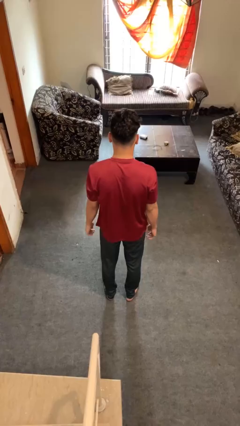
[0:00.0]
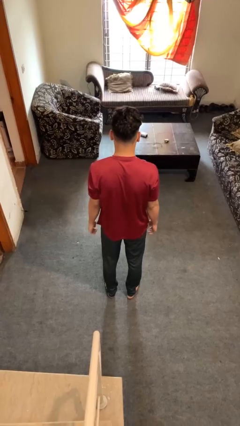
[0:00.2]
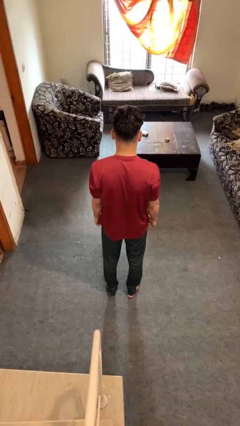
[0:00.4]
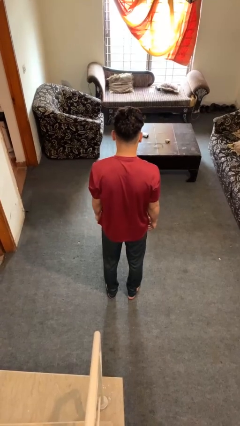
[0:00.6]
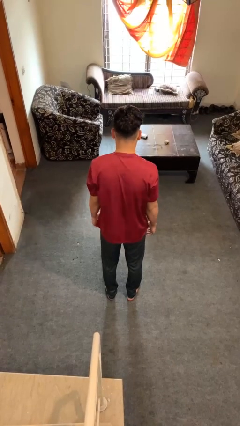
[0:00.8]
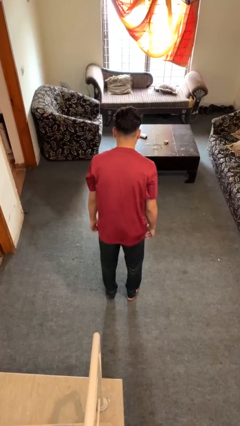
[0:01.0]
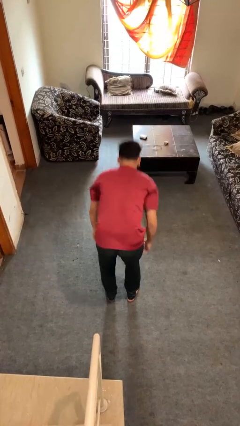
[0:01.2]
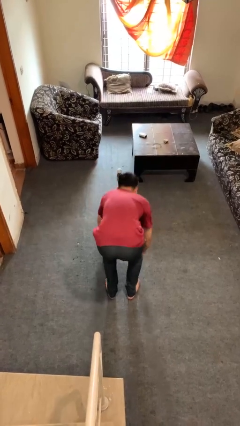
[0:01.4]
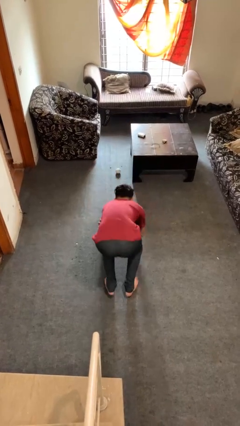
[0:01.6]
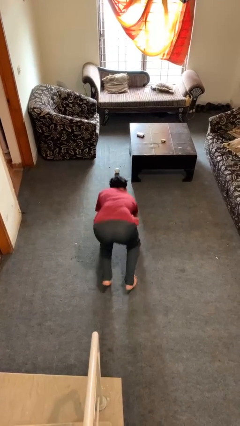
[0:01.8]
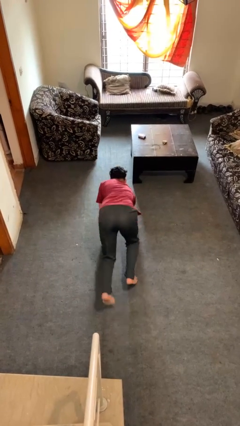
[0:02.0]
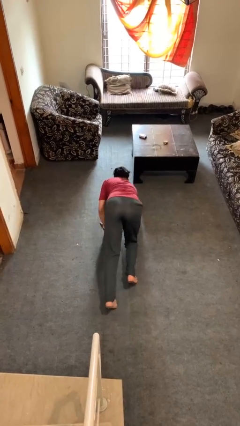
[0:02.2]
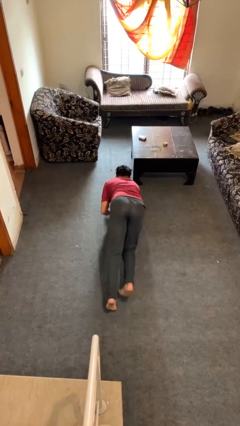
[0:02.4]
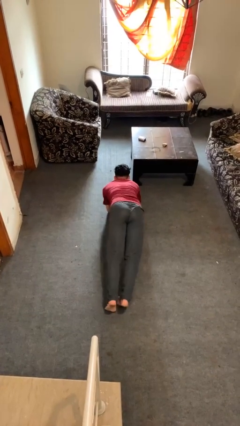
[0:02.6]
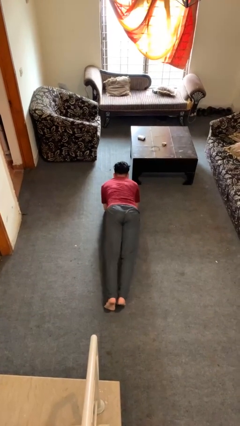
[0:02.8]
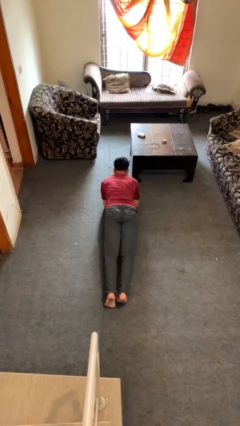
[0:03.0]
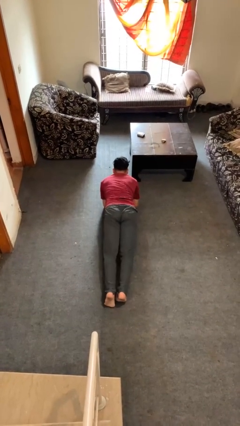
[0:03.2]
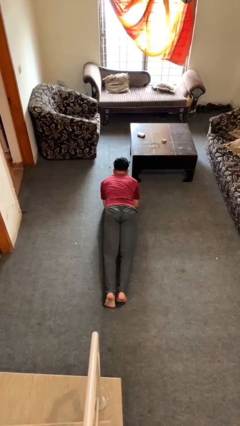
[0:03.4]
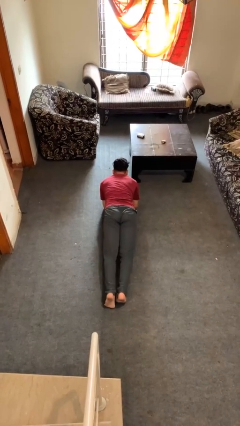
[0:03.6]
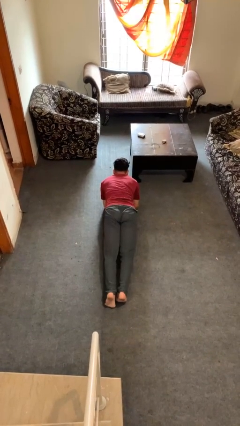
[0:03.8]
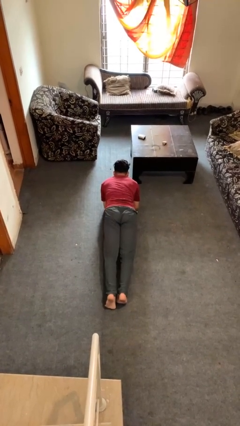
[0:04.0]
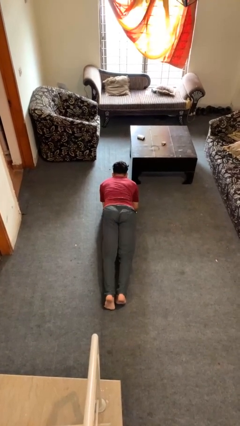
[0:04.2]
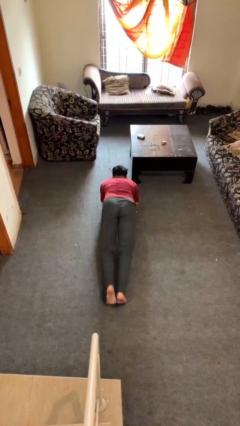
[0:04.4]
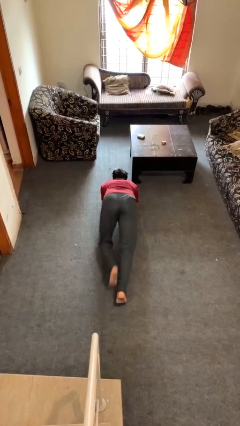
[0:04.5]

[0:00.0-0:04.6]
person exercises with plank

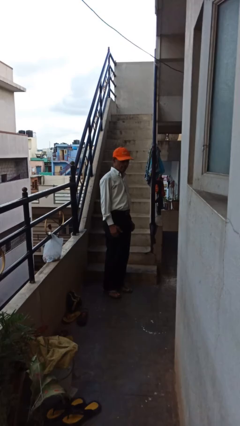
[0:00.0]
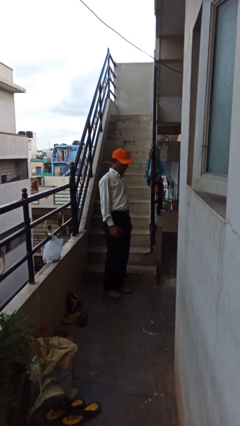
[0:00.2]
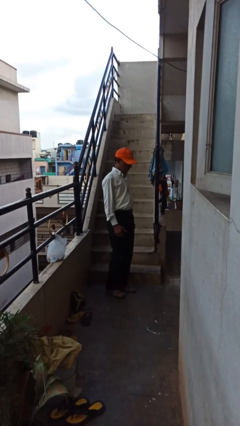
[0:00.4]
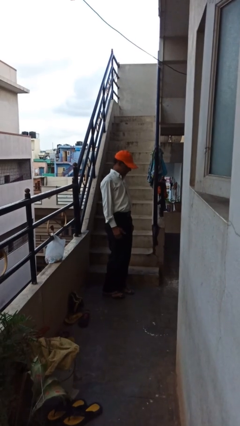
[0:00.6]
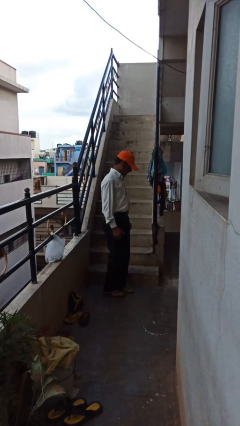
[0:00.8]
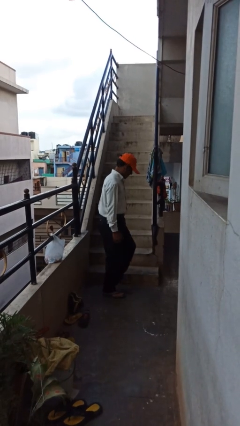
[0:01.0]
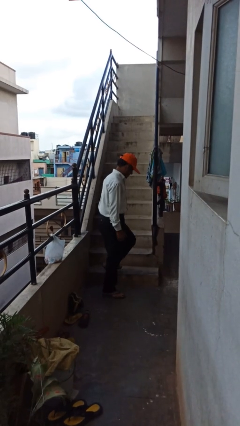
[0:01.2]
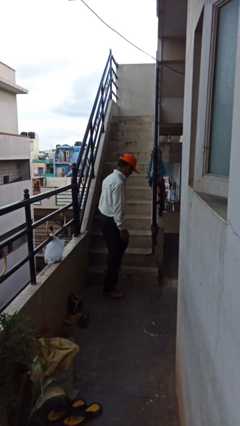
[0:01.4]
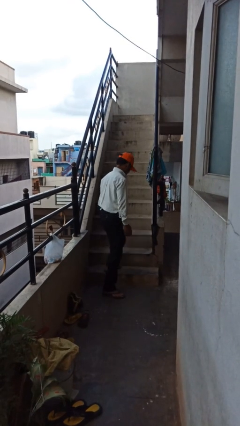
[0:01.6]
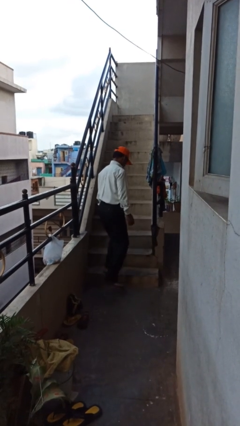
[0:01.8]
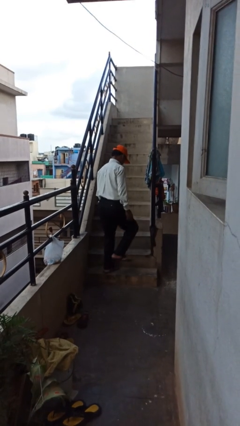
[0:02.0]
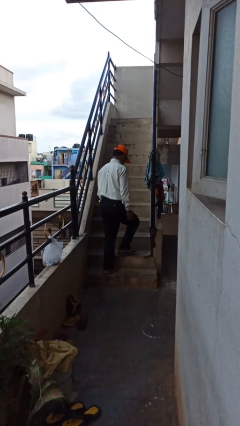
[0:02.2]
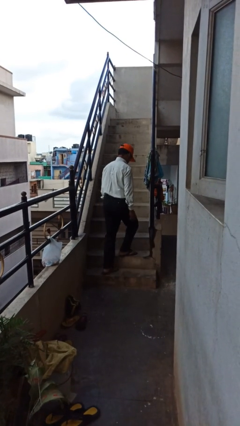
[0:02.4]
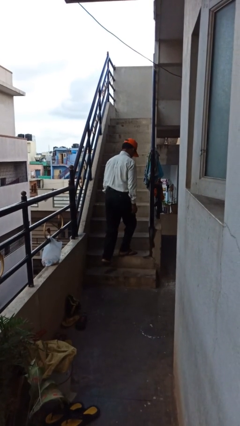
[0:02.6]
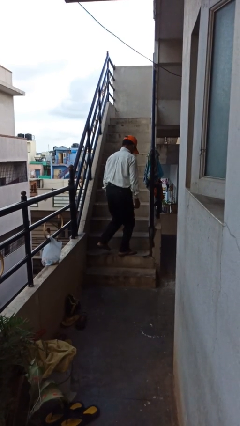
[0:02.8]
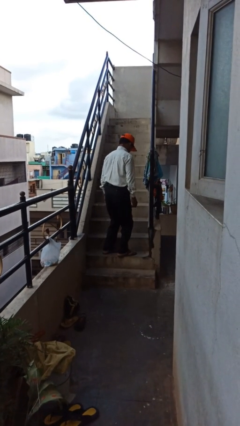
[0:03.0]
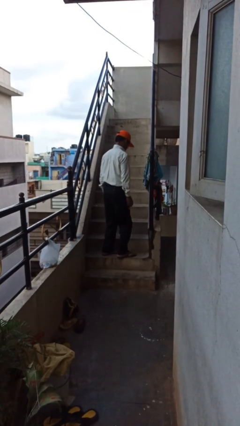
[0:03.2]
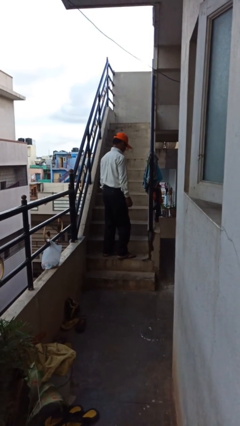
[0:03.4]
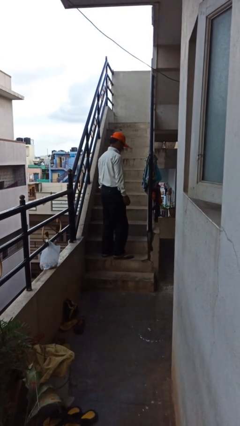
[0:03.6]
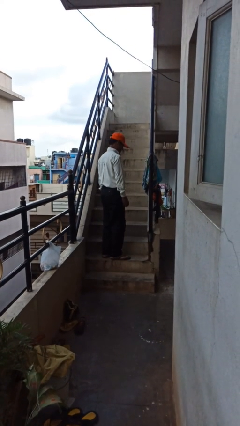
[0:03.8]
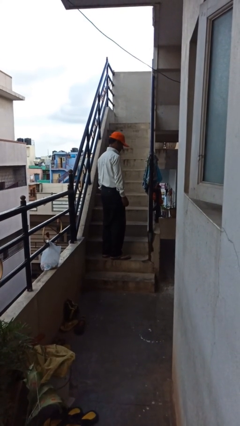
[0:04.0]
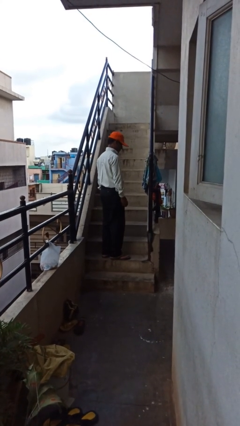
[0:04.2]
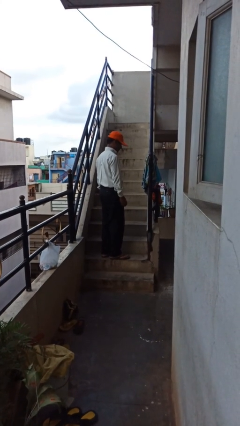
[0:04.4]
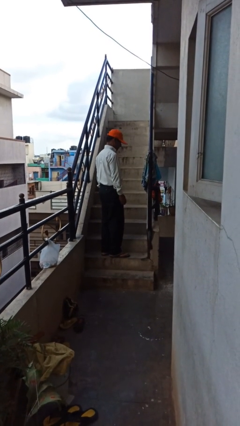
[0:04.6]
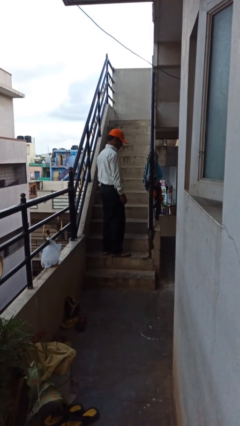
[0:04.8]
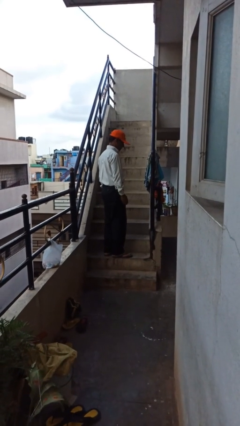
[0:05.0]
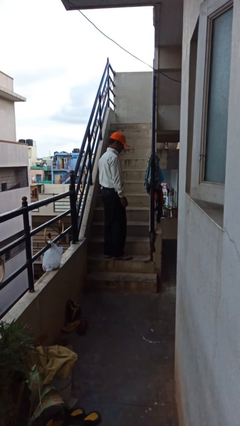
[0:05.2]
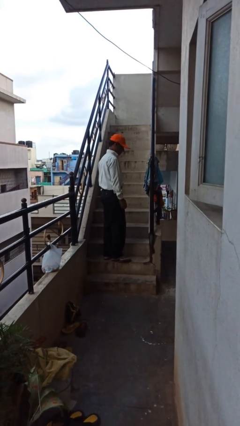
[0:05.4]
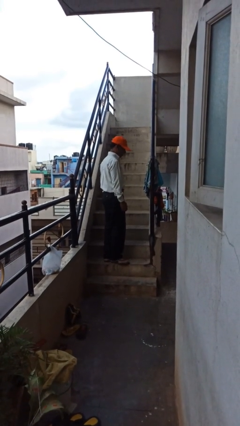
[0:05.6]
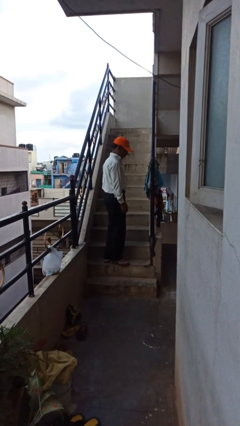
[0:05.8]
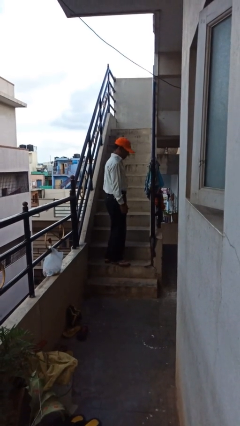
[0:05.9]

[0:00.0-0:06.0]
person climbs up stairs

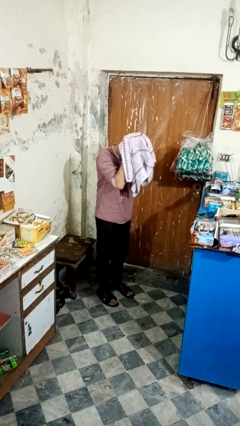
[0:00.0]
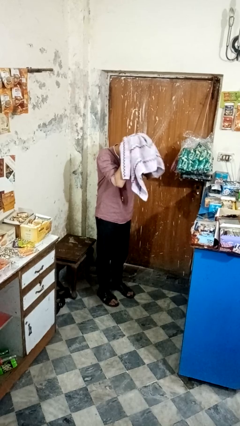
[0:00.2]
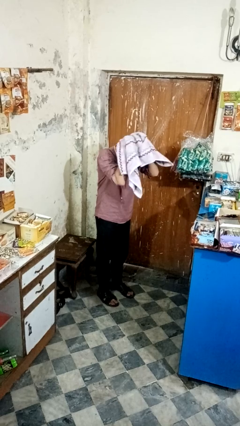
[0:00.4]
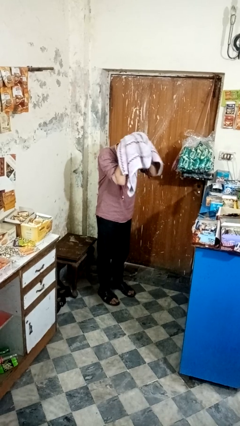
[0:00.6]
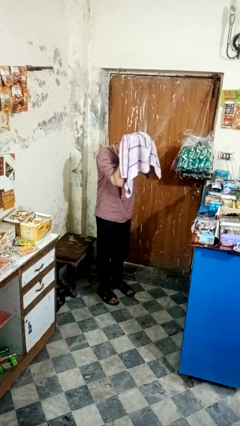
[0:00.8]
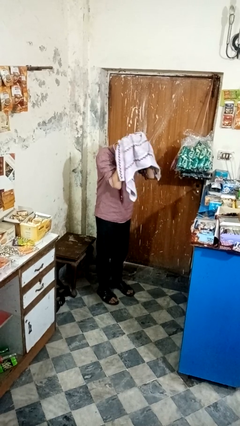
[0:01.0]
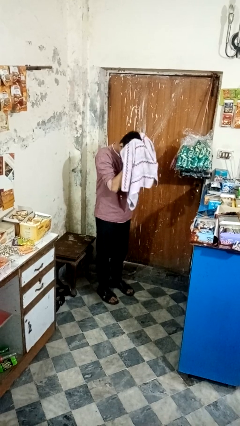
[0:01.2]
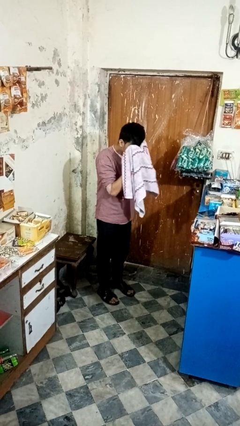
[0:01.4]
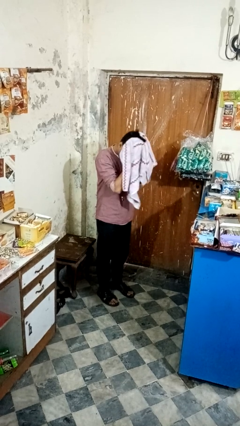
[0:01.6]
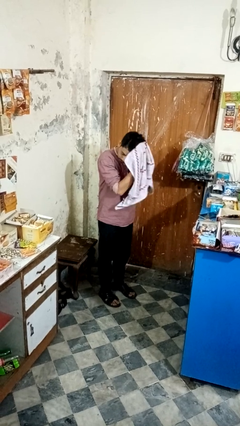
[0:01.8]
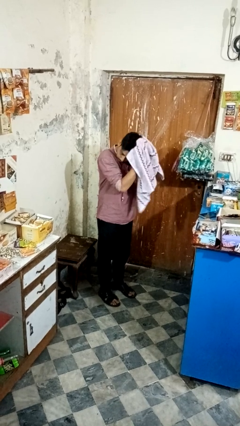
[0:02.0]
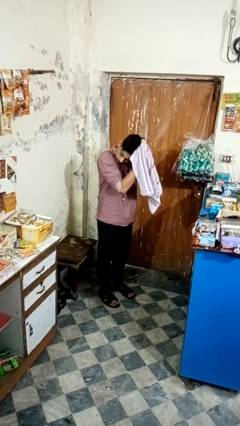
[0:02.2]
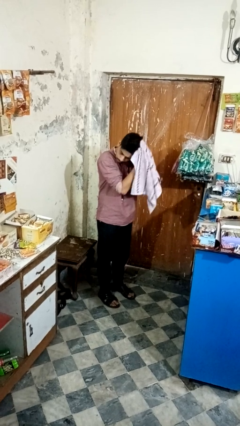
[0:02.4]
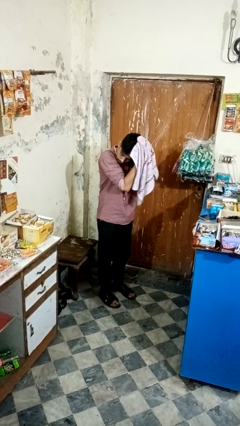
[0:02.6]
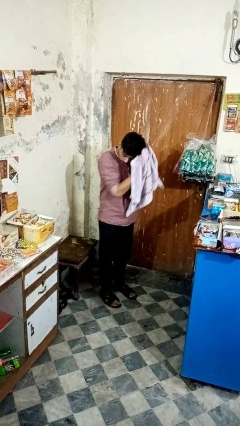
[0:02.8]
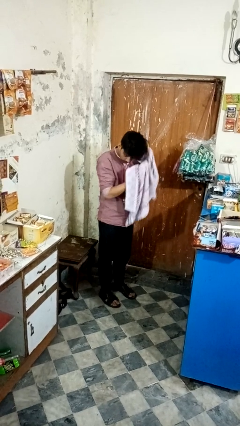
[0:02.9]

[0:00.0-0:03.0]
person dries hair with towel

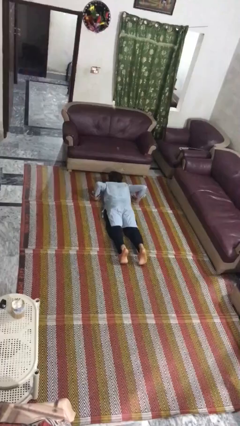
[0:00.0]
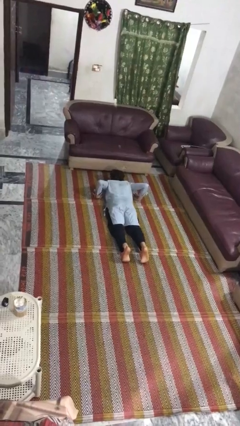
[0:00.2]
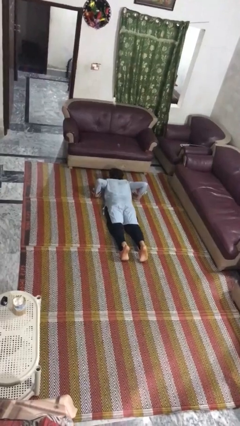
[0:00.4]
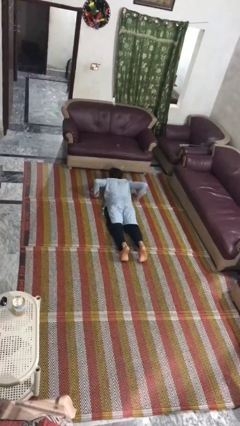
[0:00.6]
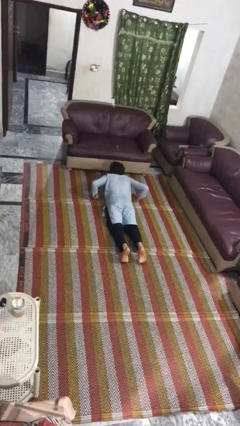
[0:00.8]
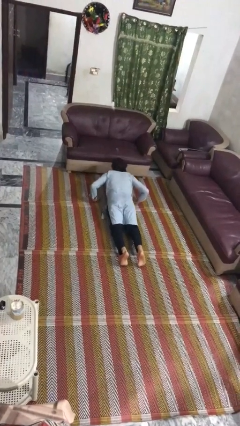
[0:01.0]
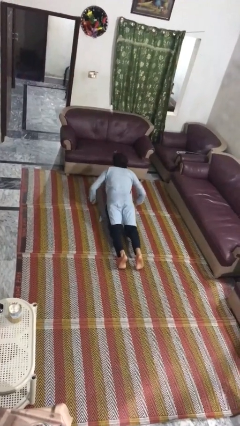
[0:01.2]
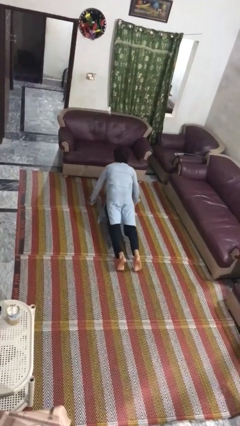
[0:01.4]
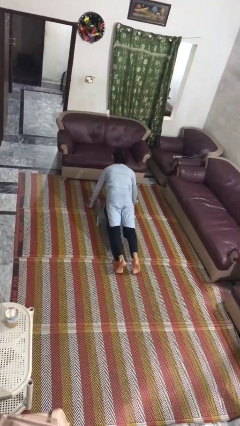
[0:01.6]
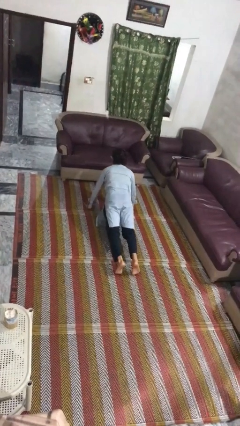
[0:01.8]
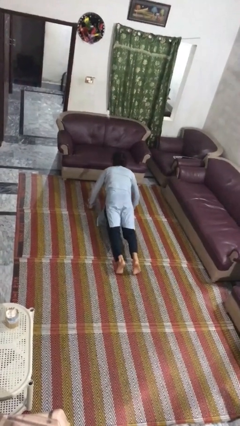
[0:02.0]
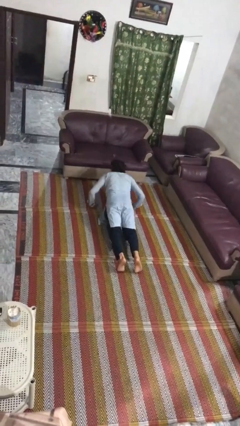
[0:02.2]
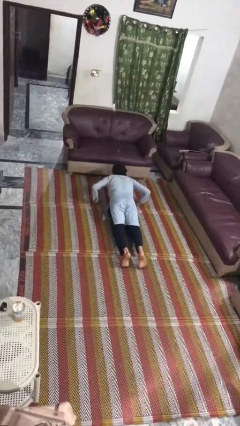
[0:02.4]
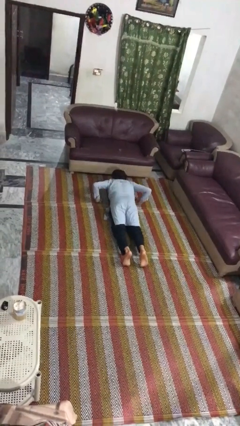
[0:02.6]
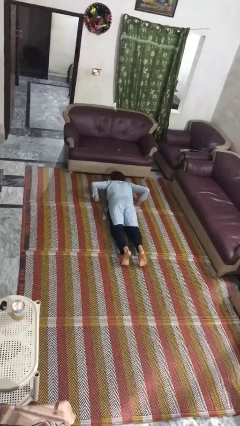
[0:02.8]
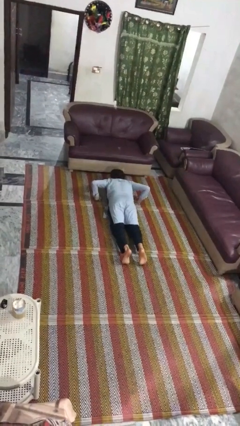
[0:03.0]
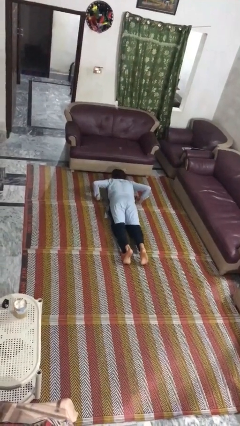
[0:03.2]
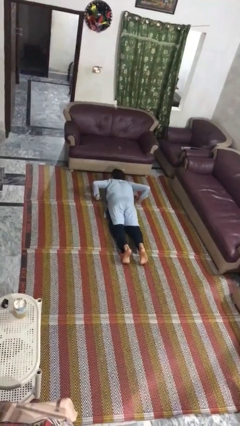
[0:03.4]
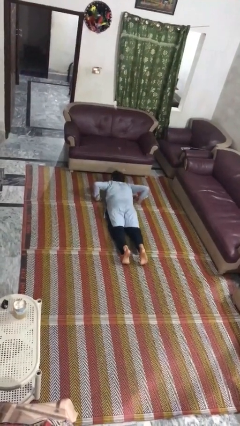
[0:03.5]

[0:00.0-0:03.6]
person exercises with pushup

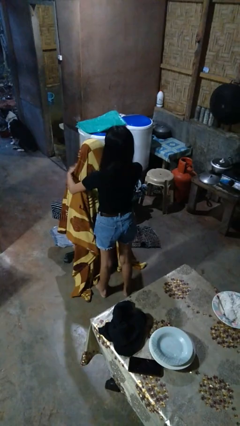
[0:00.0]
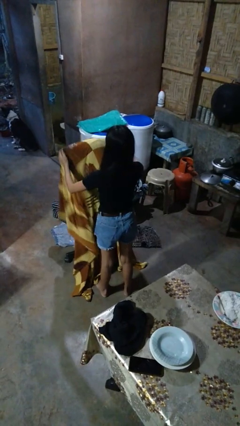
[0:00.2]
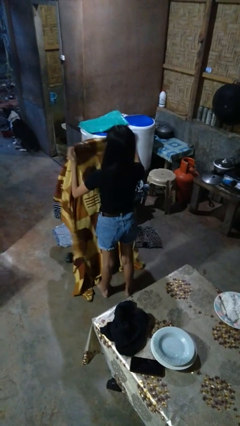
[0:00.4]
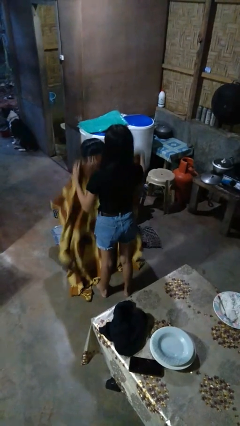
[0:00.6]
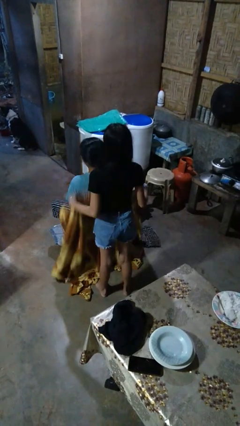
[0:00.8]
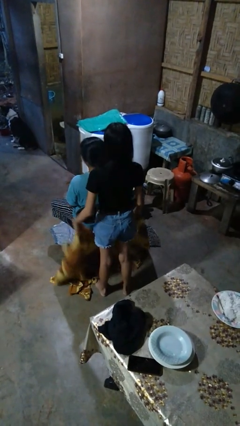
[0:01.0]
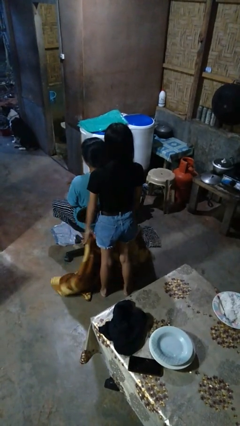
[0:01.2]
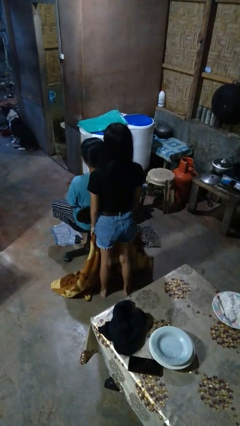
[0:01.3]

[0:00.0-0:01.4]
person uncovers friend with blanket
